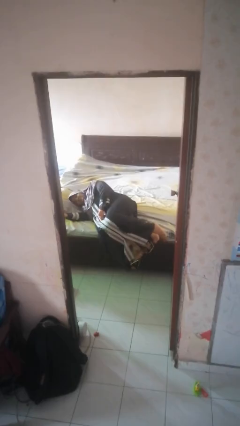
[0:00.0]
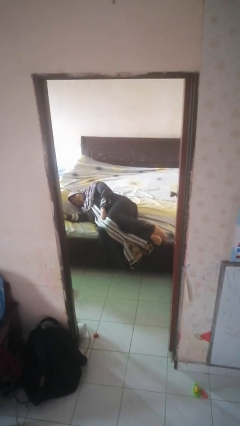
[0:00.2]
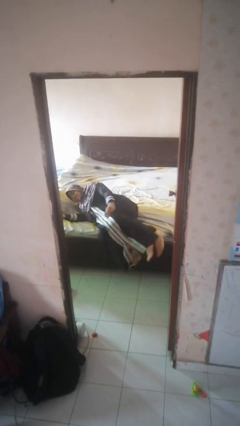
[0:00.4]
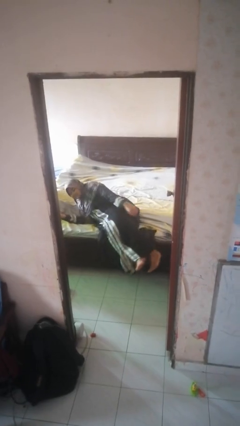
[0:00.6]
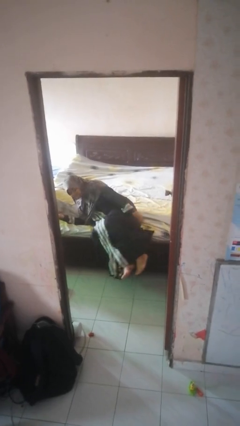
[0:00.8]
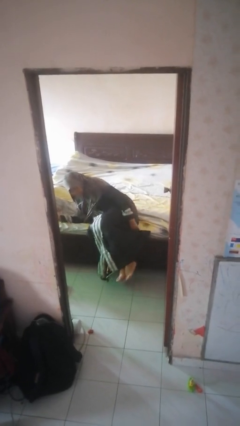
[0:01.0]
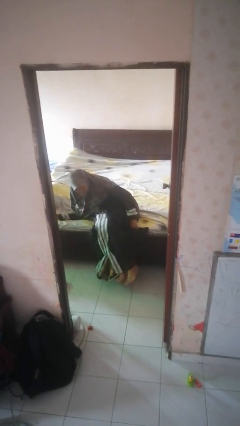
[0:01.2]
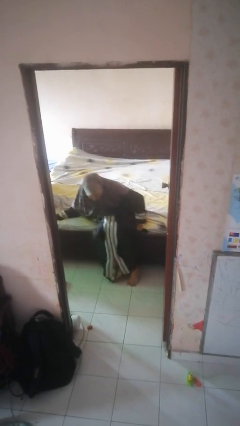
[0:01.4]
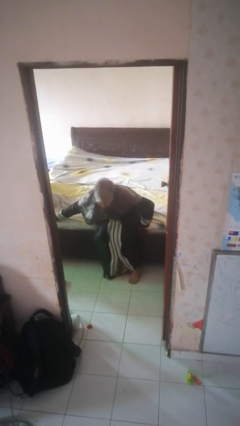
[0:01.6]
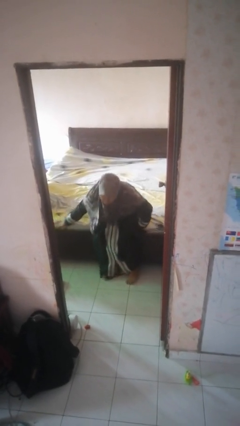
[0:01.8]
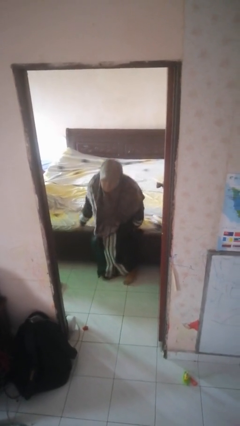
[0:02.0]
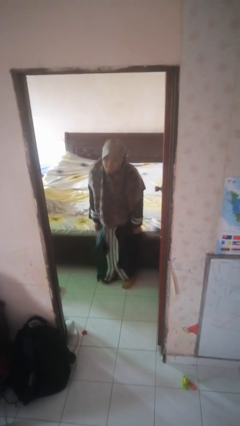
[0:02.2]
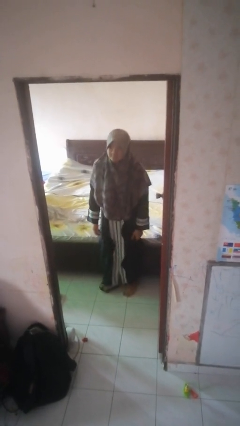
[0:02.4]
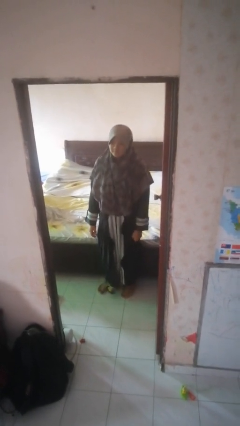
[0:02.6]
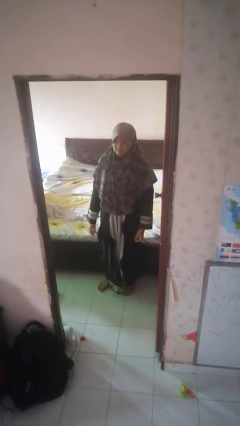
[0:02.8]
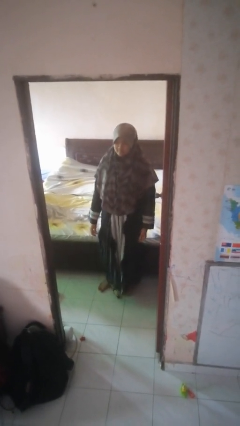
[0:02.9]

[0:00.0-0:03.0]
person stands up

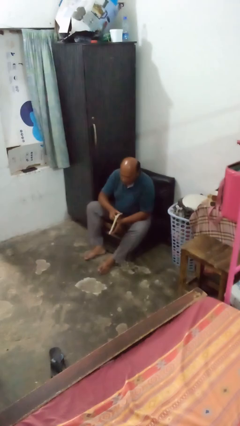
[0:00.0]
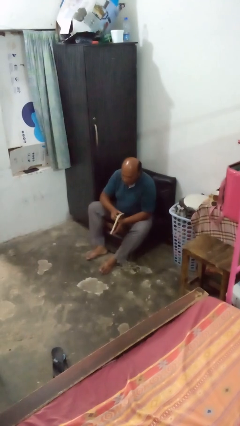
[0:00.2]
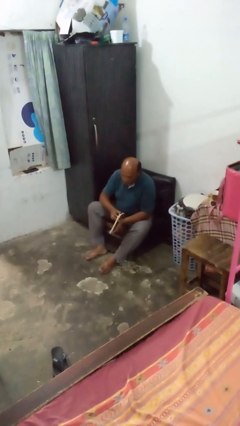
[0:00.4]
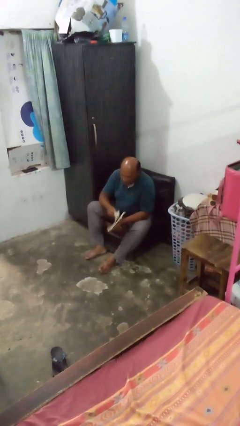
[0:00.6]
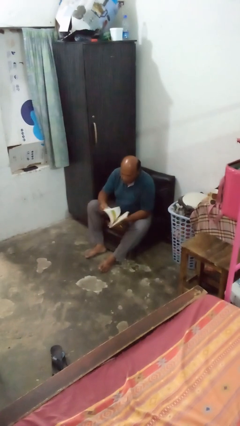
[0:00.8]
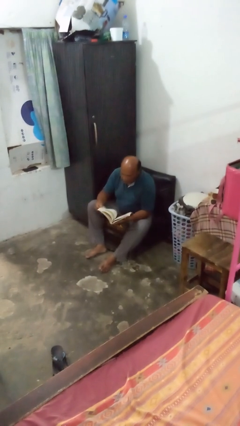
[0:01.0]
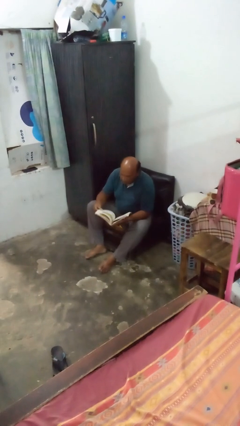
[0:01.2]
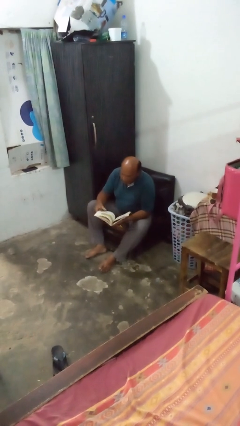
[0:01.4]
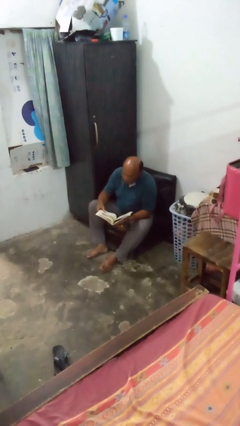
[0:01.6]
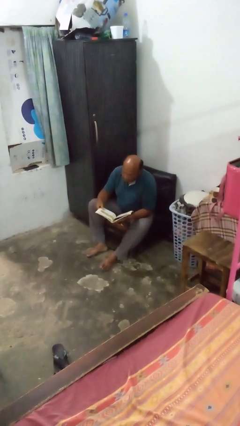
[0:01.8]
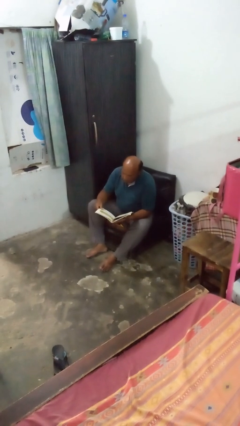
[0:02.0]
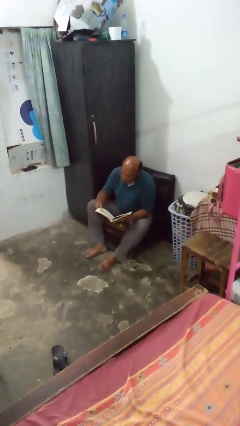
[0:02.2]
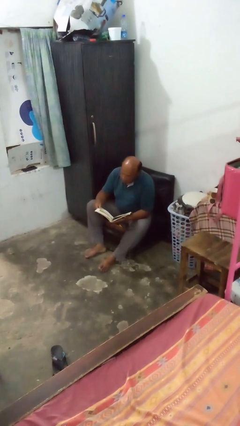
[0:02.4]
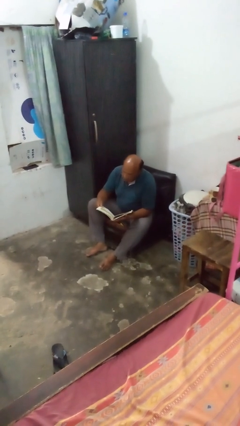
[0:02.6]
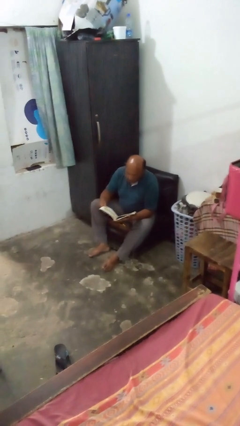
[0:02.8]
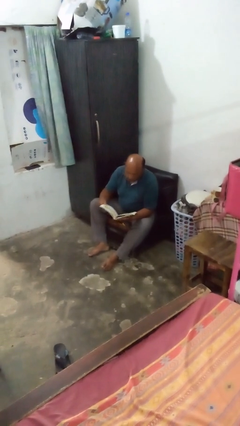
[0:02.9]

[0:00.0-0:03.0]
person reads magazine

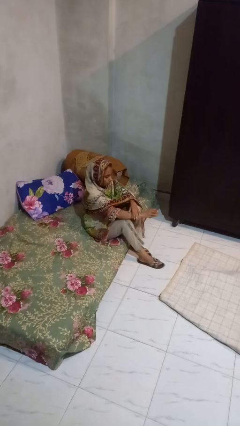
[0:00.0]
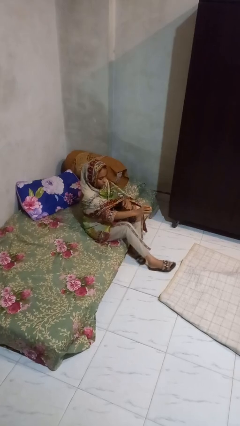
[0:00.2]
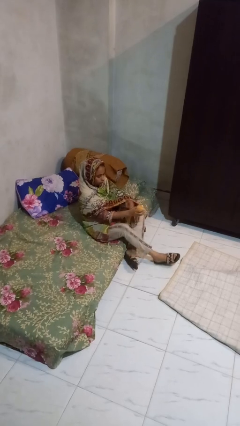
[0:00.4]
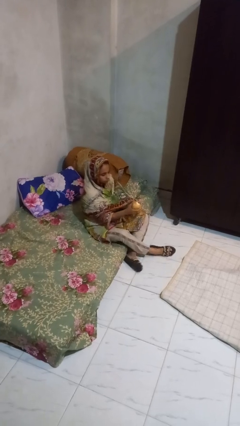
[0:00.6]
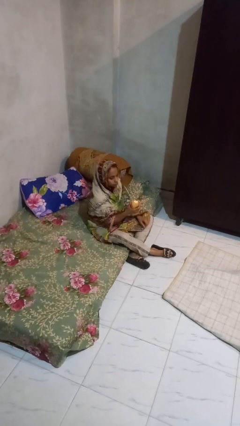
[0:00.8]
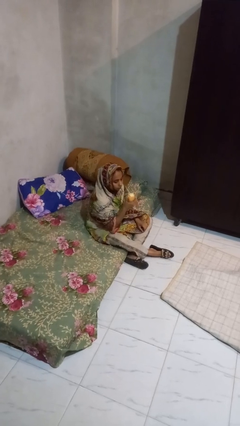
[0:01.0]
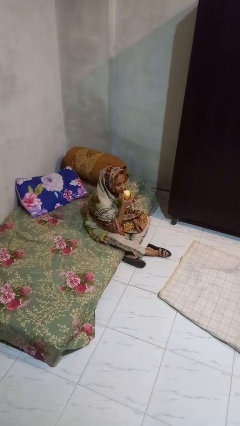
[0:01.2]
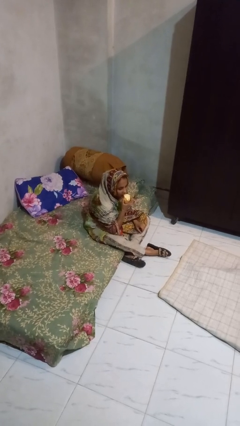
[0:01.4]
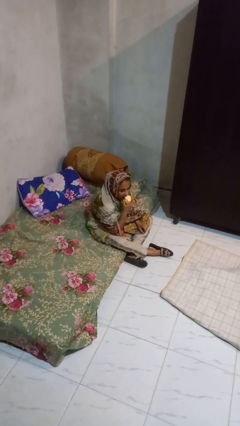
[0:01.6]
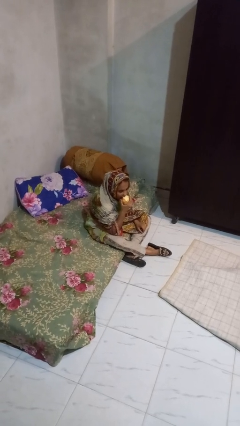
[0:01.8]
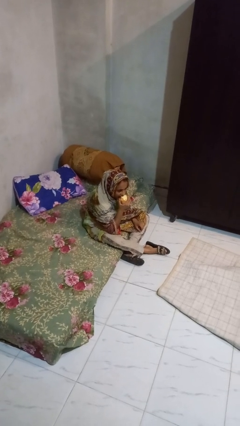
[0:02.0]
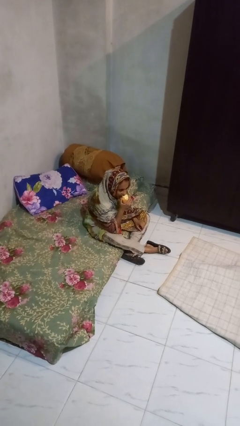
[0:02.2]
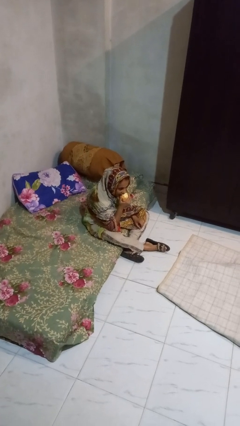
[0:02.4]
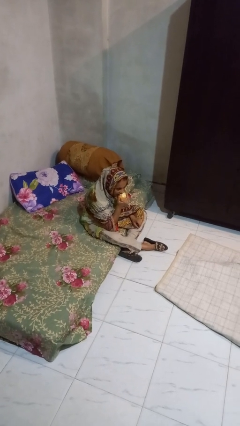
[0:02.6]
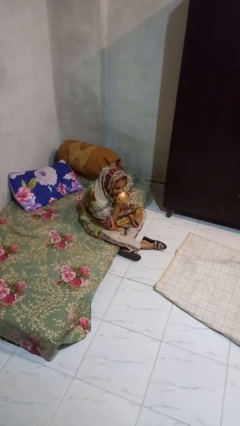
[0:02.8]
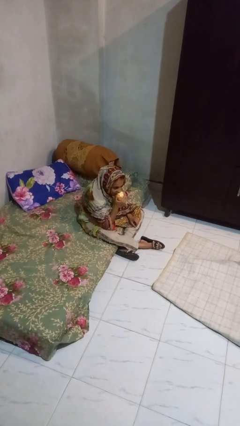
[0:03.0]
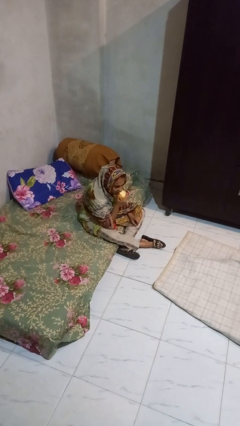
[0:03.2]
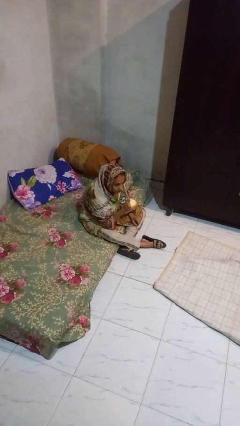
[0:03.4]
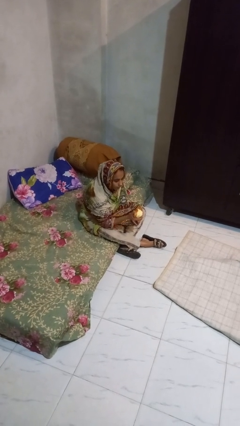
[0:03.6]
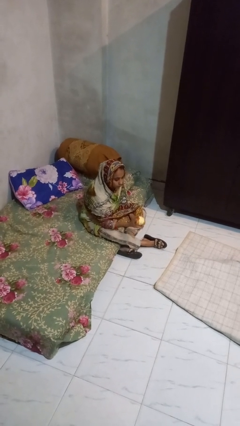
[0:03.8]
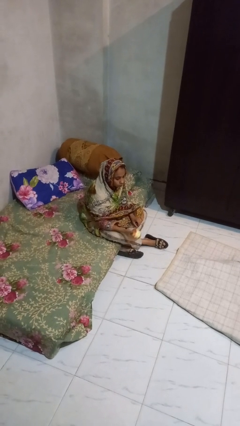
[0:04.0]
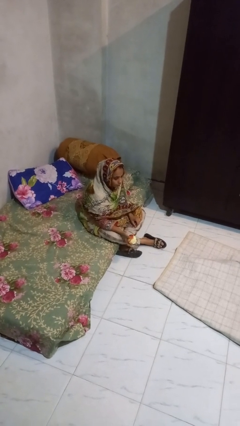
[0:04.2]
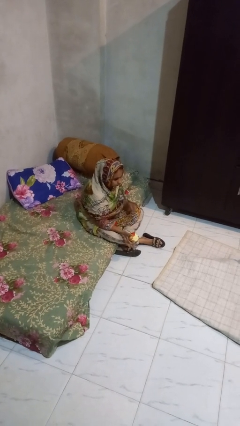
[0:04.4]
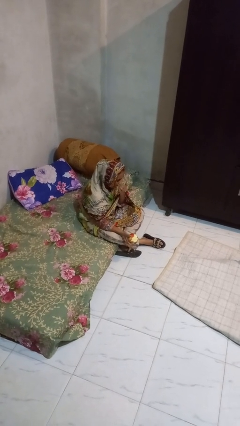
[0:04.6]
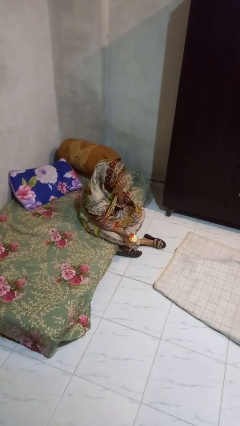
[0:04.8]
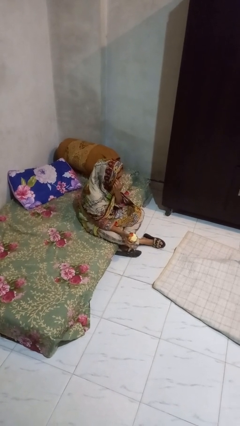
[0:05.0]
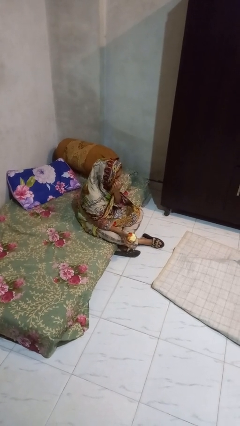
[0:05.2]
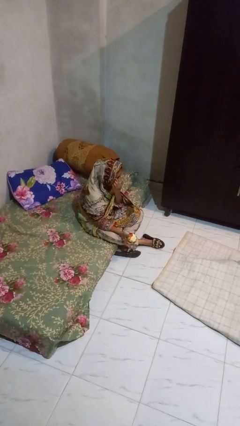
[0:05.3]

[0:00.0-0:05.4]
person eats apple

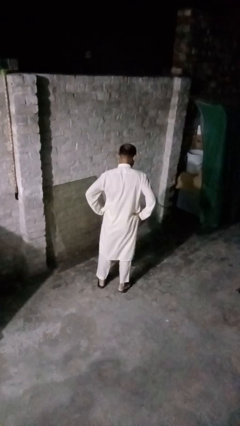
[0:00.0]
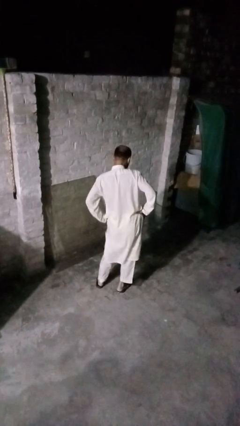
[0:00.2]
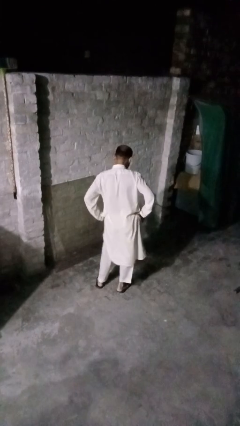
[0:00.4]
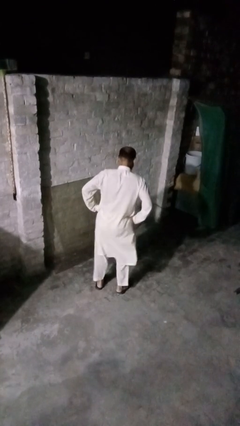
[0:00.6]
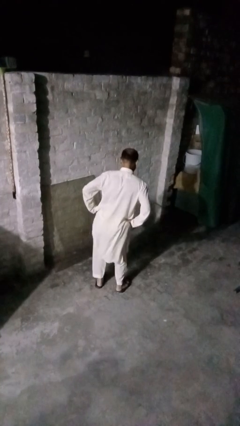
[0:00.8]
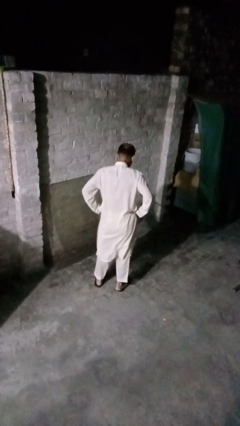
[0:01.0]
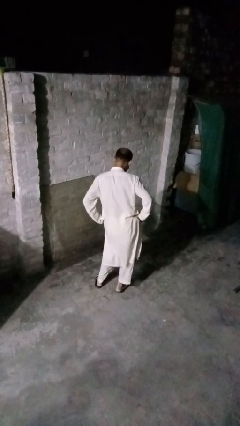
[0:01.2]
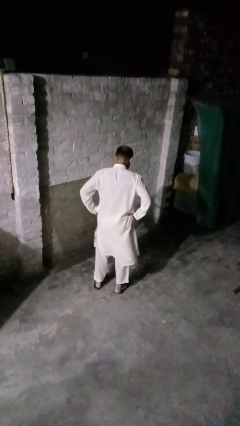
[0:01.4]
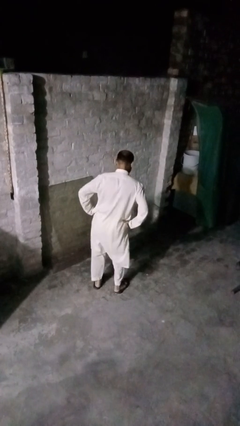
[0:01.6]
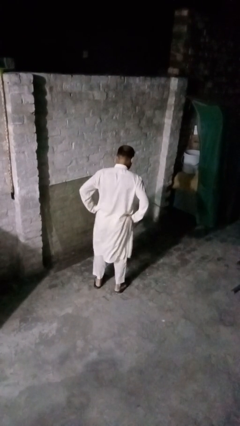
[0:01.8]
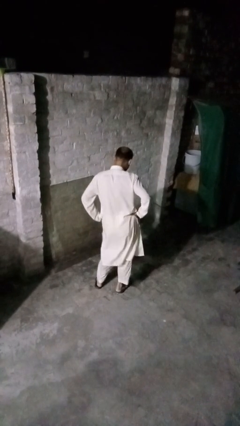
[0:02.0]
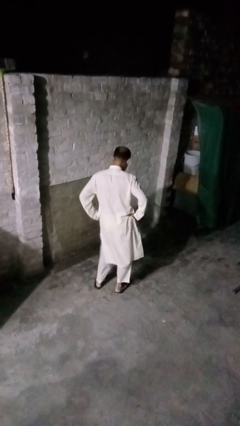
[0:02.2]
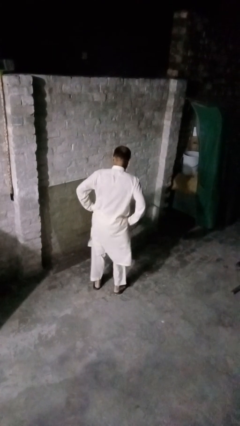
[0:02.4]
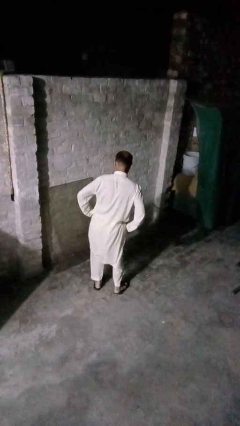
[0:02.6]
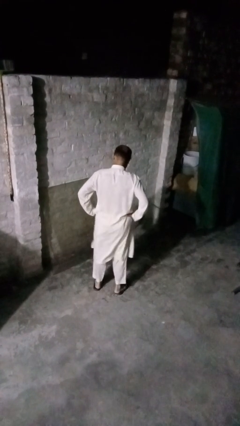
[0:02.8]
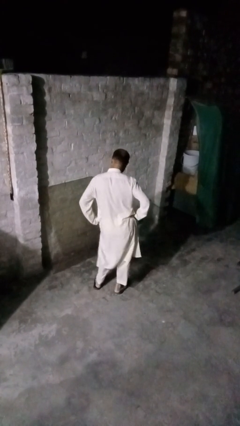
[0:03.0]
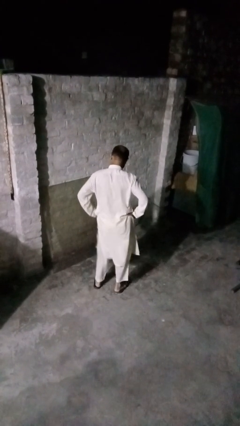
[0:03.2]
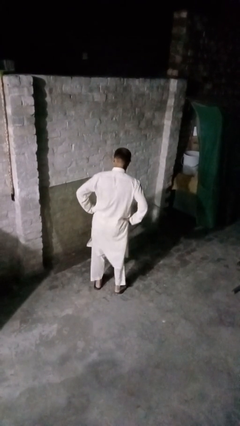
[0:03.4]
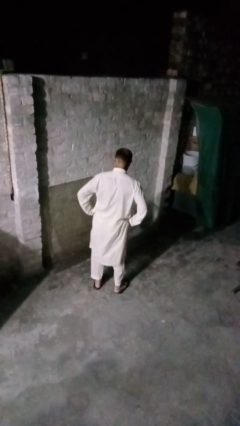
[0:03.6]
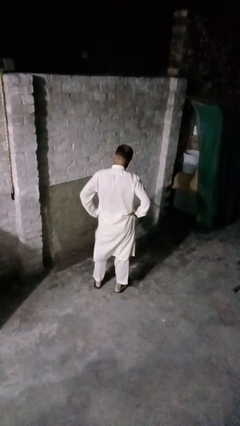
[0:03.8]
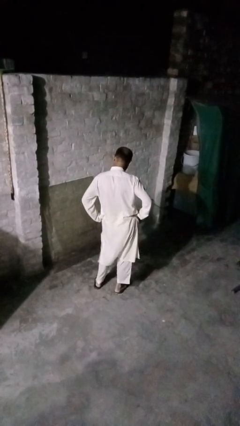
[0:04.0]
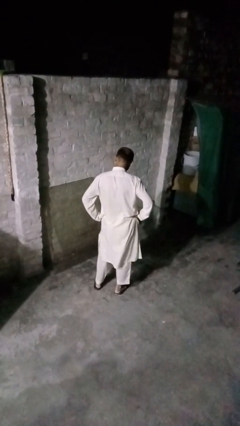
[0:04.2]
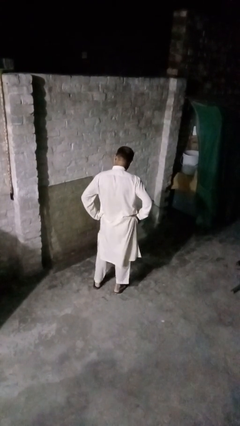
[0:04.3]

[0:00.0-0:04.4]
person wiggles hips

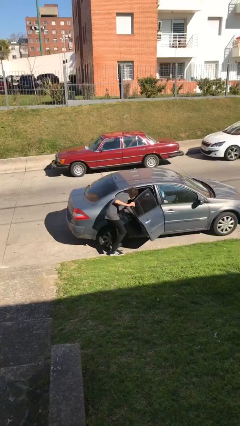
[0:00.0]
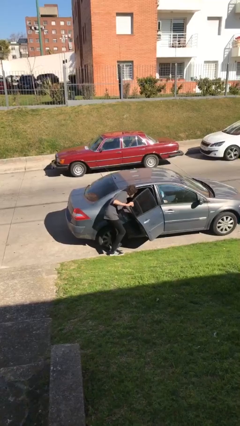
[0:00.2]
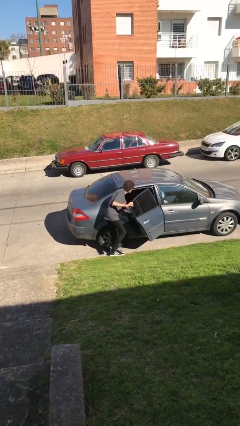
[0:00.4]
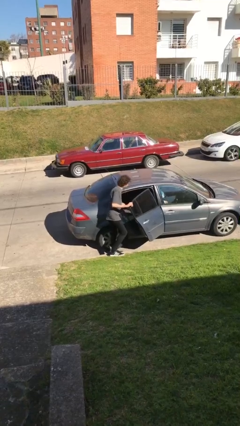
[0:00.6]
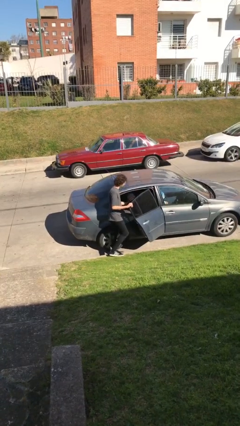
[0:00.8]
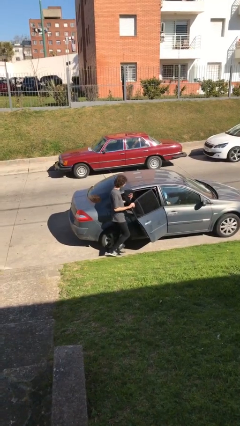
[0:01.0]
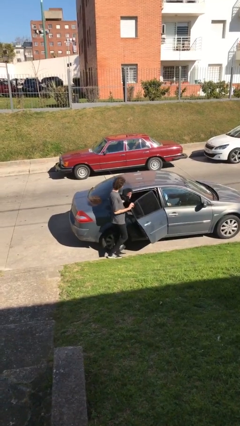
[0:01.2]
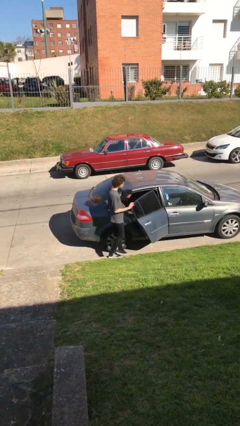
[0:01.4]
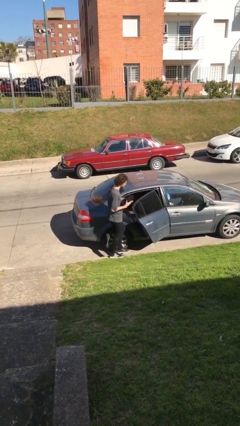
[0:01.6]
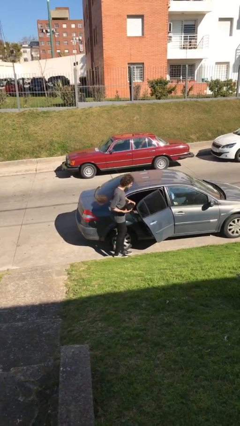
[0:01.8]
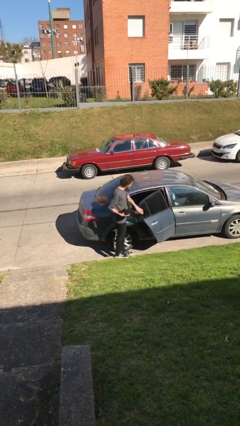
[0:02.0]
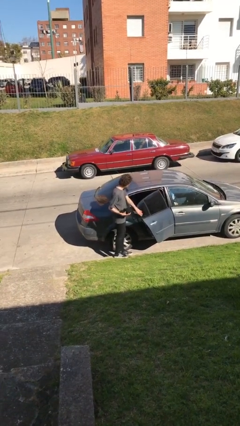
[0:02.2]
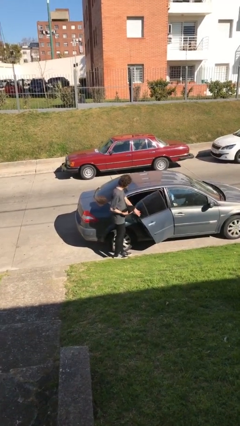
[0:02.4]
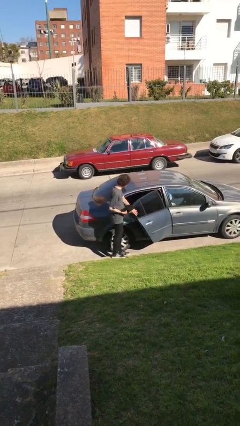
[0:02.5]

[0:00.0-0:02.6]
person unloads car
